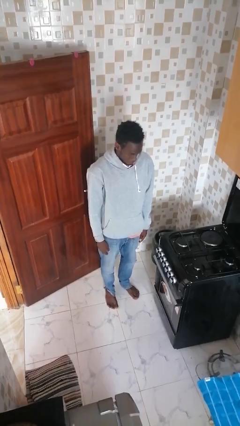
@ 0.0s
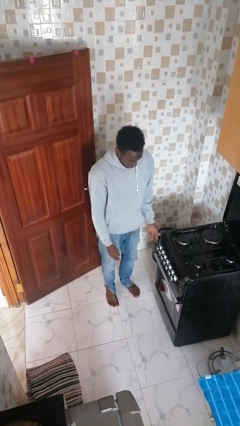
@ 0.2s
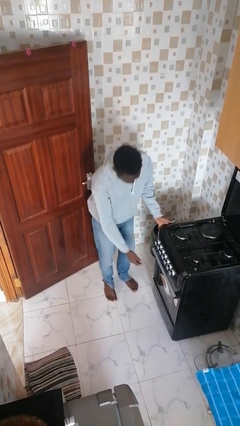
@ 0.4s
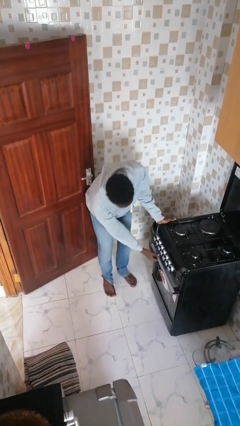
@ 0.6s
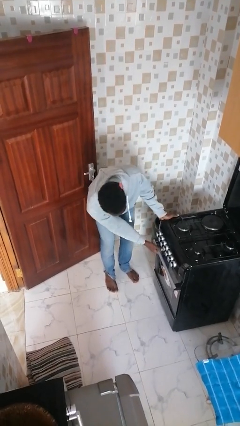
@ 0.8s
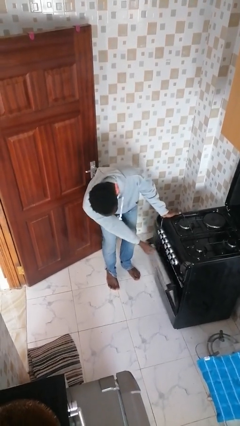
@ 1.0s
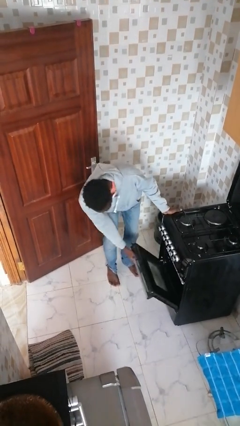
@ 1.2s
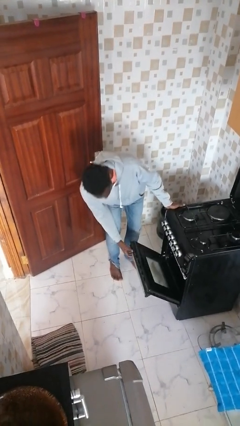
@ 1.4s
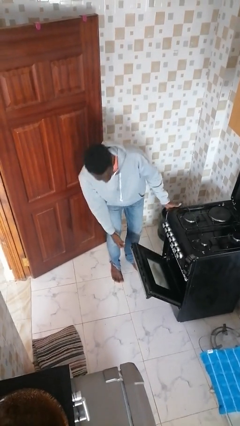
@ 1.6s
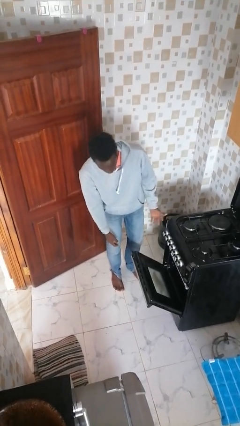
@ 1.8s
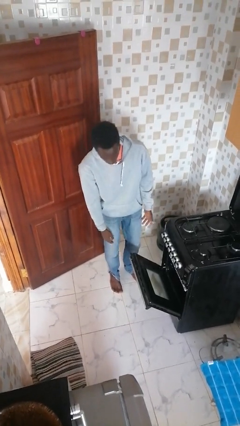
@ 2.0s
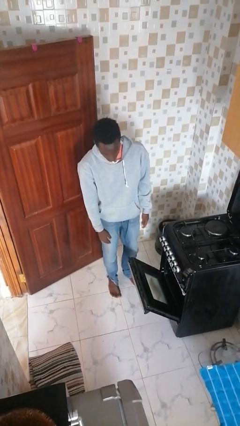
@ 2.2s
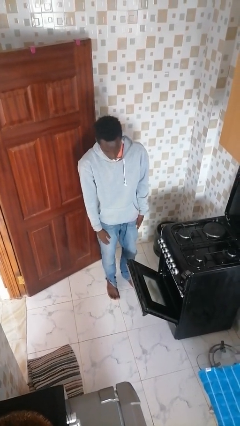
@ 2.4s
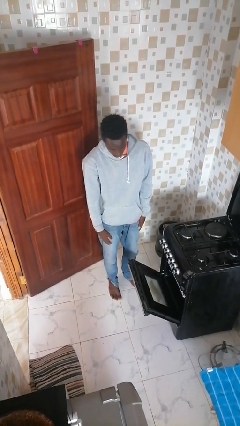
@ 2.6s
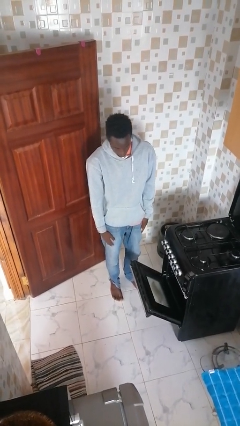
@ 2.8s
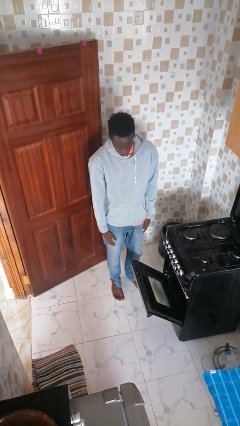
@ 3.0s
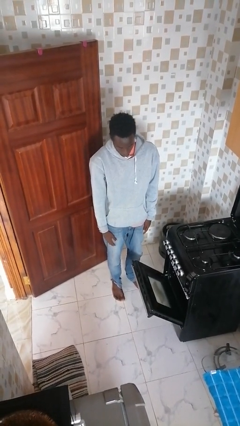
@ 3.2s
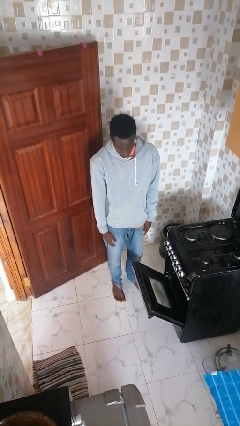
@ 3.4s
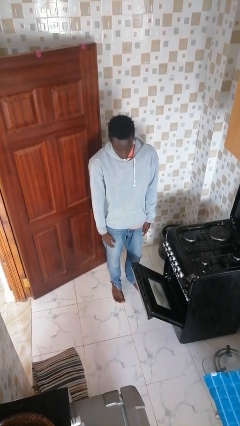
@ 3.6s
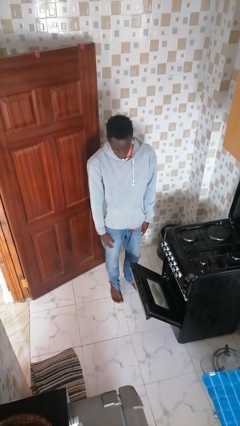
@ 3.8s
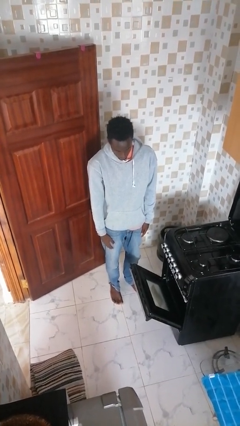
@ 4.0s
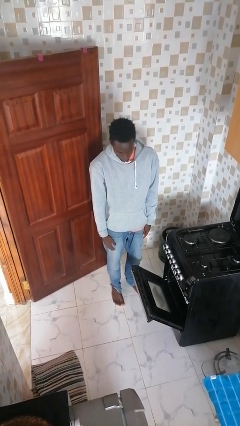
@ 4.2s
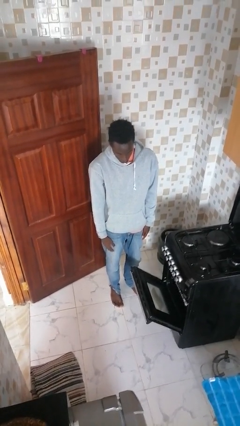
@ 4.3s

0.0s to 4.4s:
person opens oven door

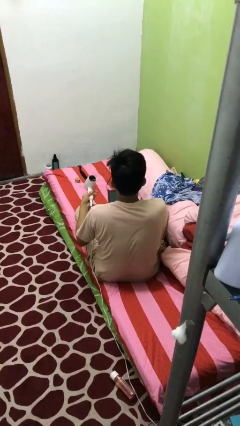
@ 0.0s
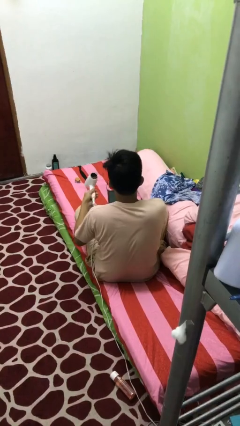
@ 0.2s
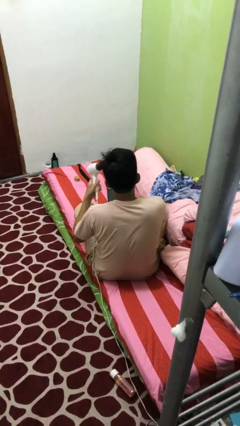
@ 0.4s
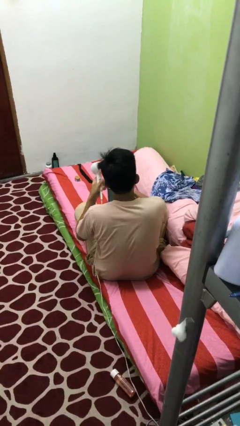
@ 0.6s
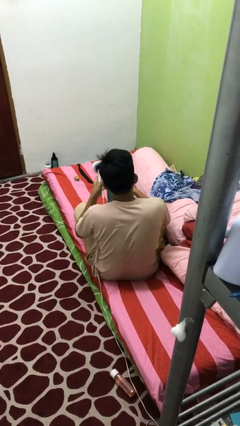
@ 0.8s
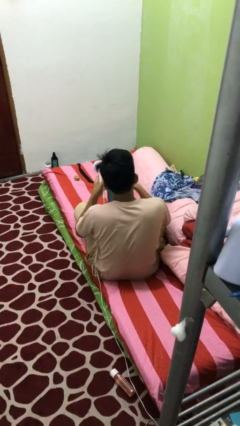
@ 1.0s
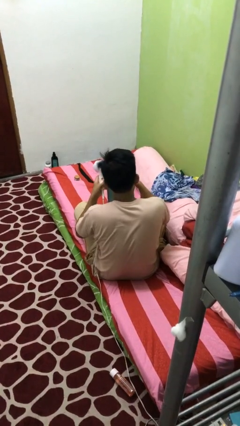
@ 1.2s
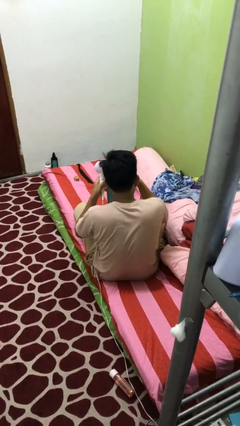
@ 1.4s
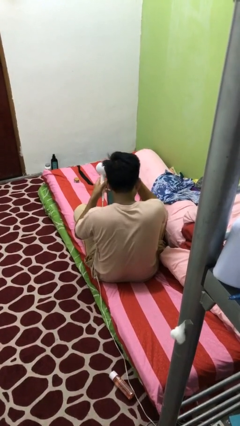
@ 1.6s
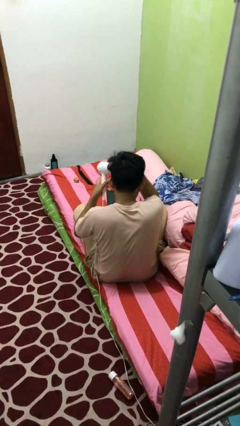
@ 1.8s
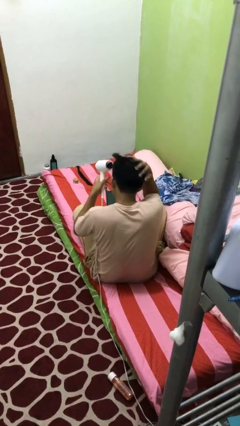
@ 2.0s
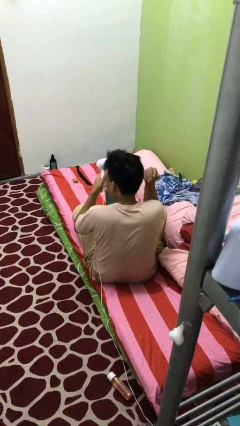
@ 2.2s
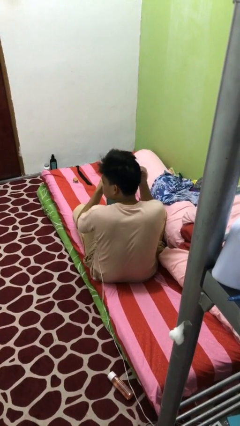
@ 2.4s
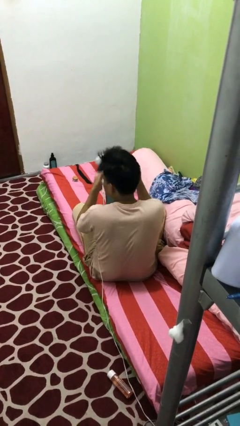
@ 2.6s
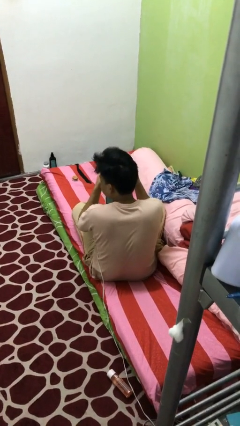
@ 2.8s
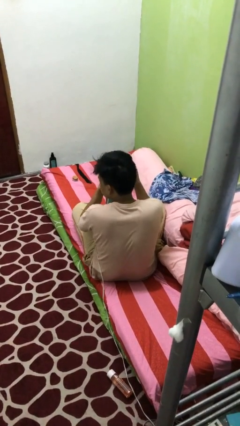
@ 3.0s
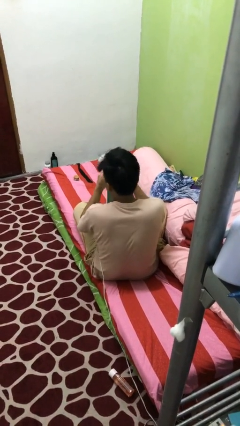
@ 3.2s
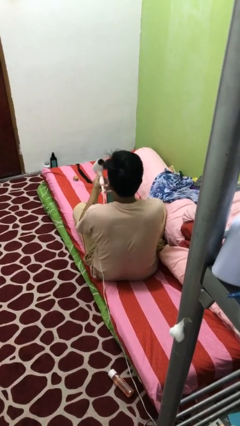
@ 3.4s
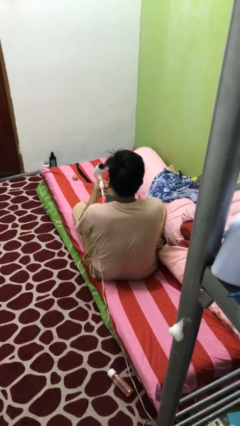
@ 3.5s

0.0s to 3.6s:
person dries hair with hairdryer

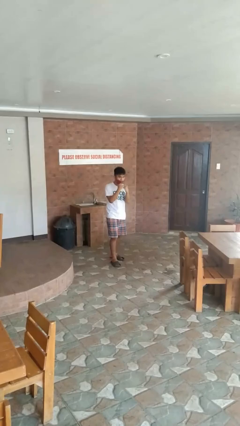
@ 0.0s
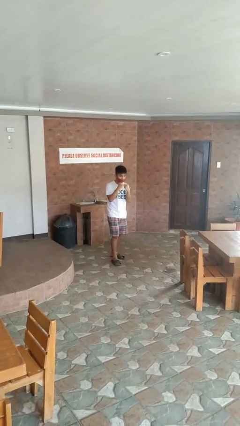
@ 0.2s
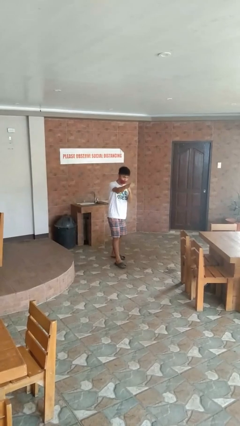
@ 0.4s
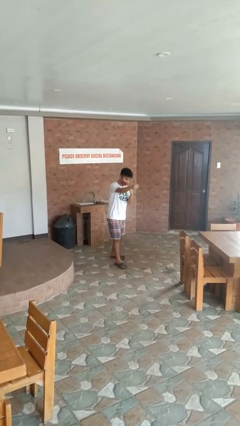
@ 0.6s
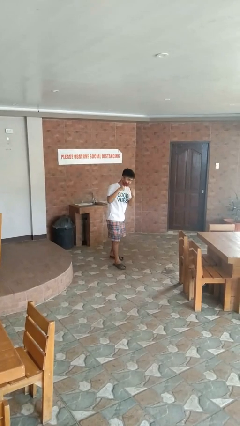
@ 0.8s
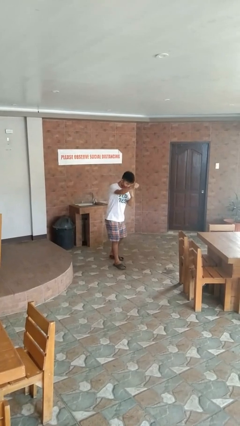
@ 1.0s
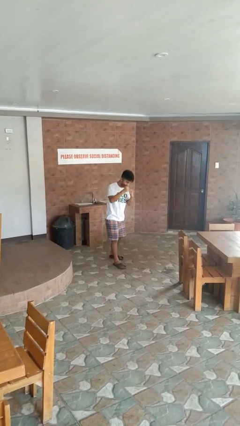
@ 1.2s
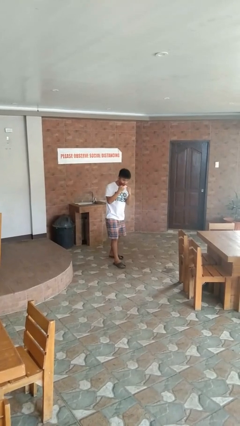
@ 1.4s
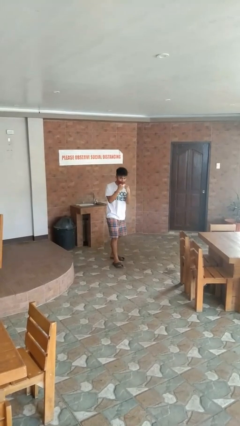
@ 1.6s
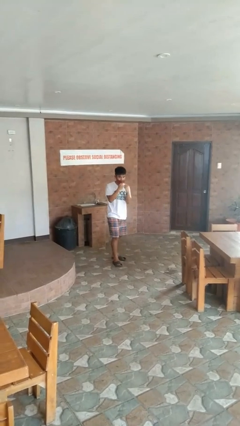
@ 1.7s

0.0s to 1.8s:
person punches

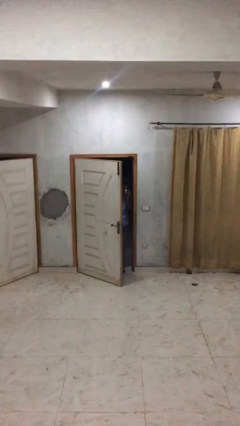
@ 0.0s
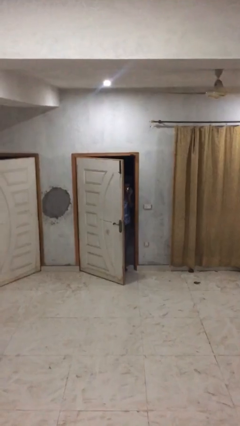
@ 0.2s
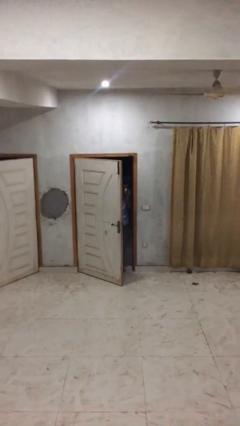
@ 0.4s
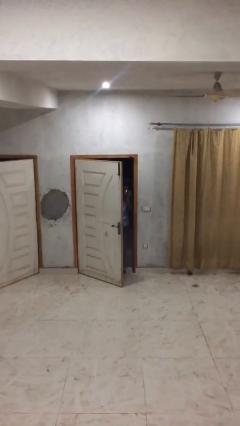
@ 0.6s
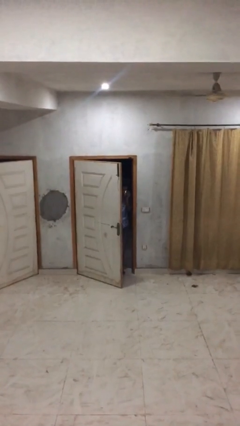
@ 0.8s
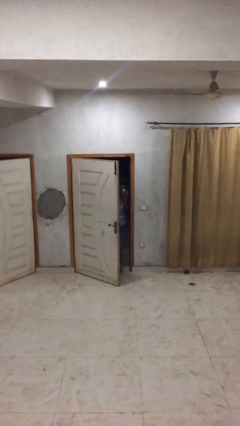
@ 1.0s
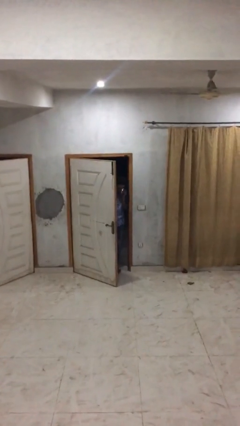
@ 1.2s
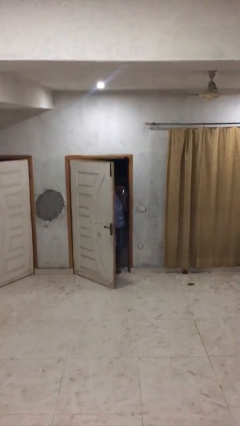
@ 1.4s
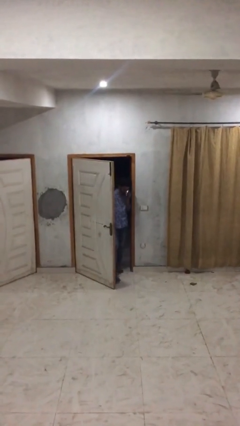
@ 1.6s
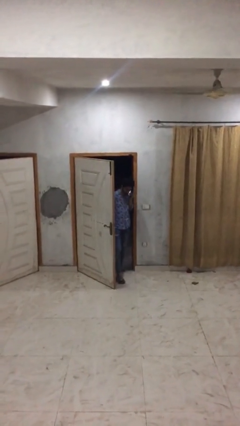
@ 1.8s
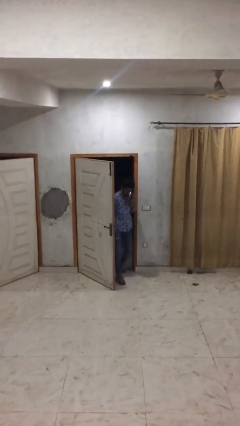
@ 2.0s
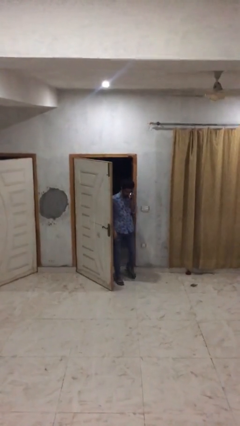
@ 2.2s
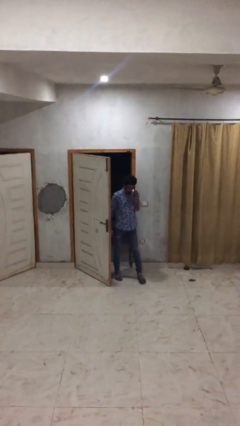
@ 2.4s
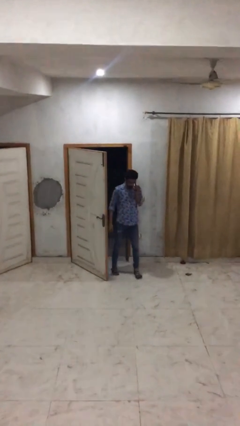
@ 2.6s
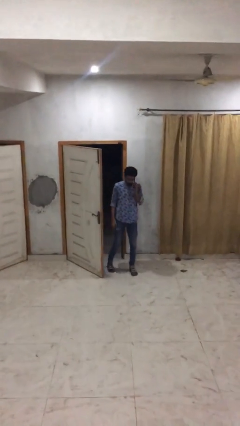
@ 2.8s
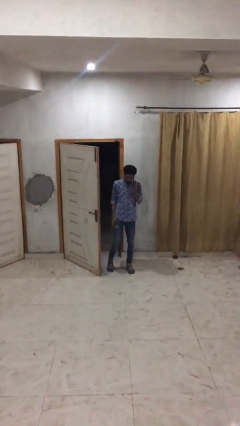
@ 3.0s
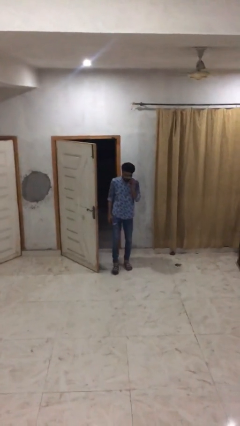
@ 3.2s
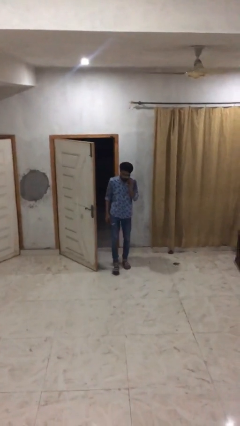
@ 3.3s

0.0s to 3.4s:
person enters scene through structure

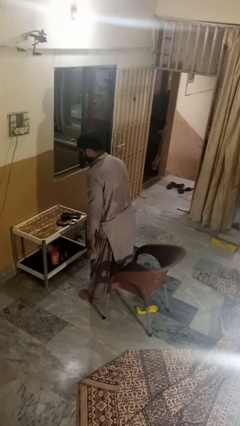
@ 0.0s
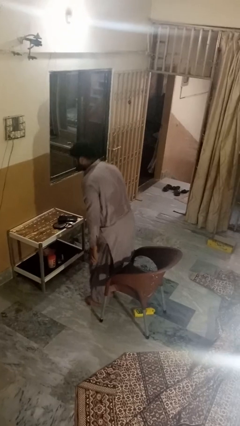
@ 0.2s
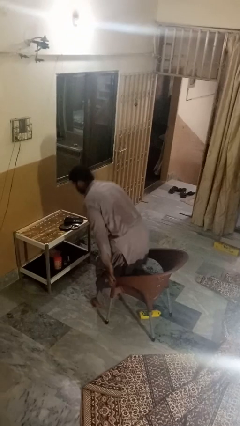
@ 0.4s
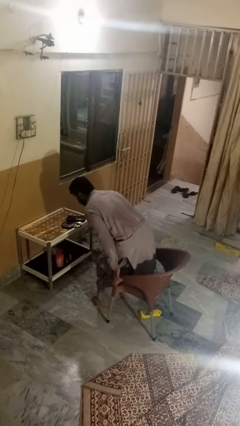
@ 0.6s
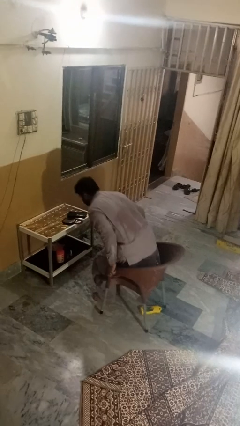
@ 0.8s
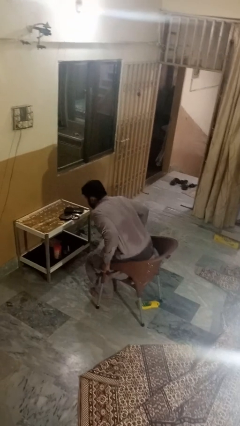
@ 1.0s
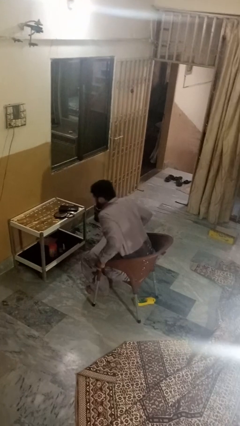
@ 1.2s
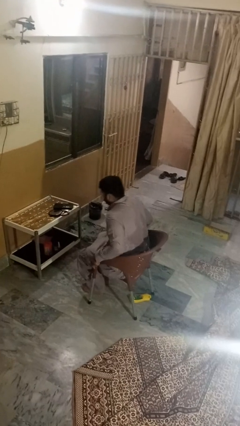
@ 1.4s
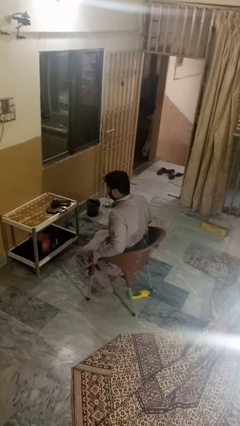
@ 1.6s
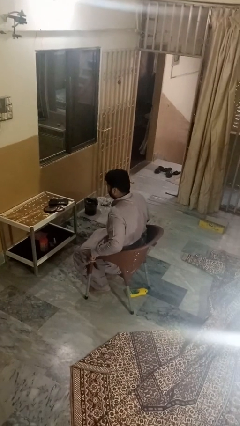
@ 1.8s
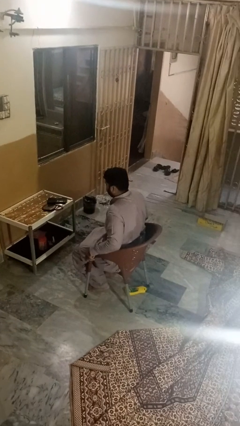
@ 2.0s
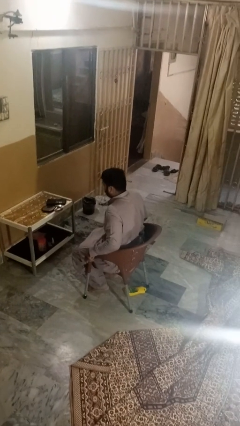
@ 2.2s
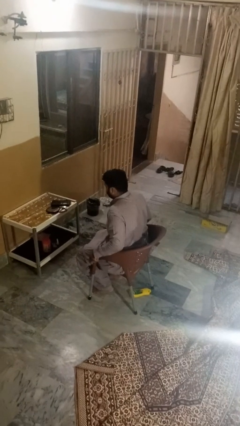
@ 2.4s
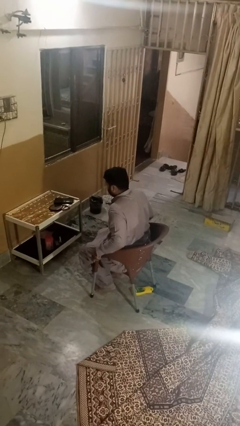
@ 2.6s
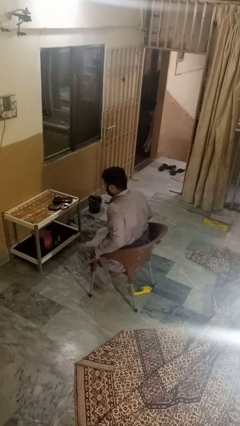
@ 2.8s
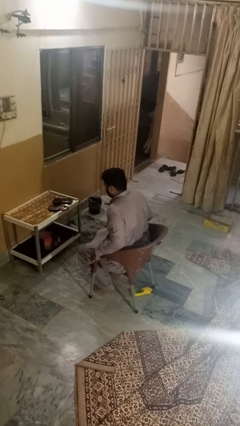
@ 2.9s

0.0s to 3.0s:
person sits down

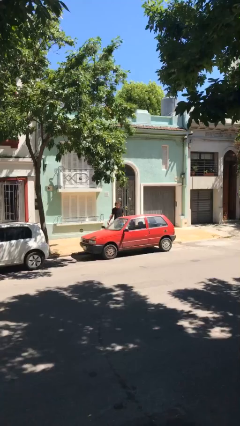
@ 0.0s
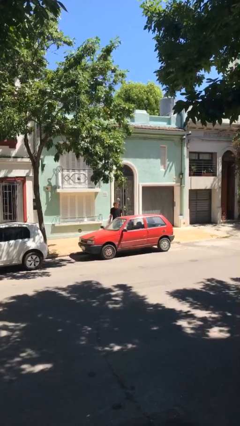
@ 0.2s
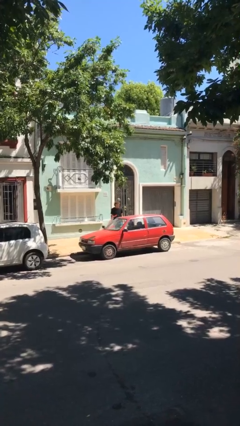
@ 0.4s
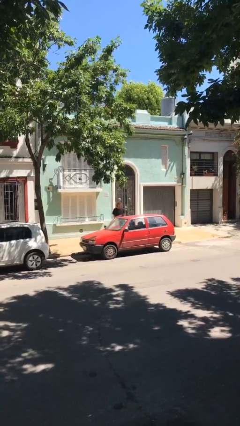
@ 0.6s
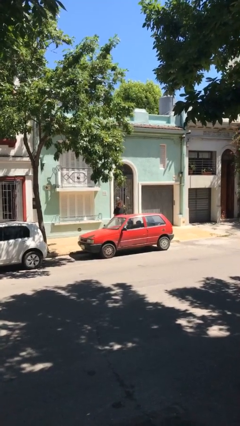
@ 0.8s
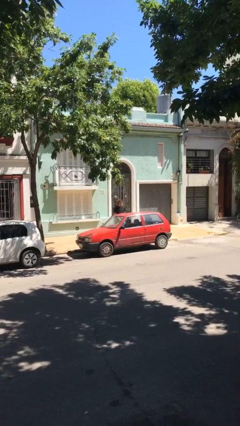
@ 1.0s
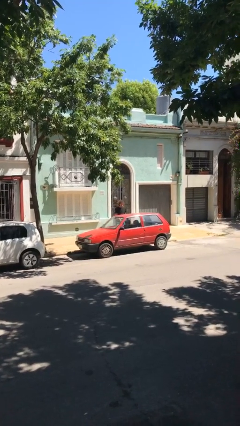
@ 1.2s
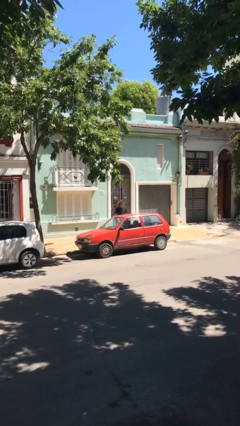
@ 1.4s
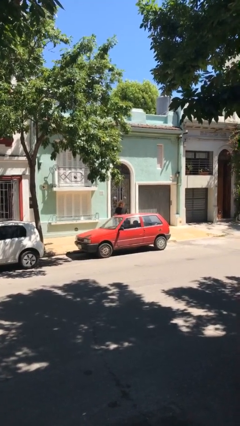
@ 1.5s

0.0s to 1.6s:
person closes car door
